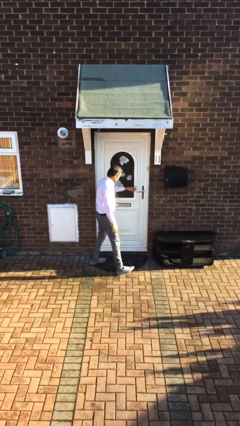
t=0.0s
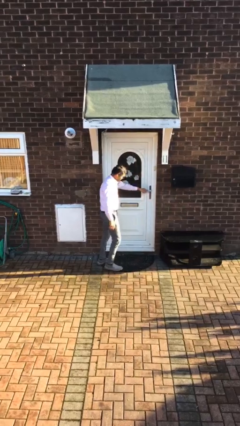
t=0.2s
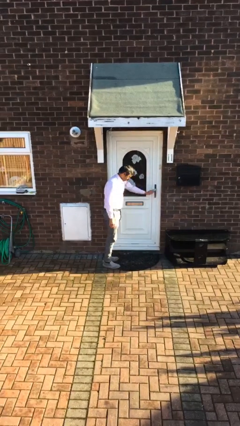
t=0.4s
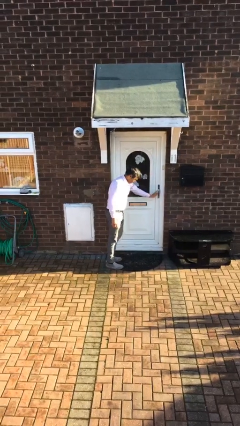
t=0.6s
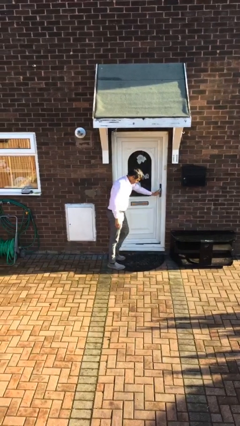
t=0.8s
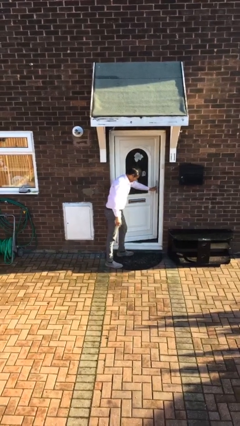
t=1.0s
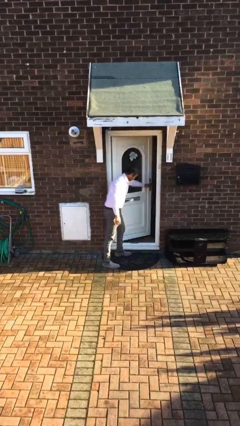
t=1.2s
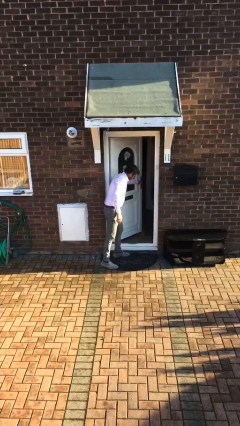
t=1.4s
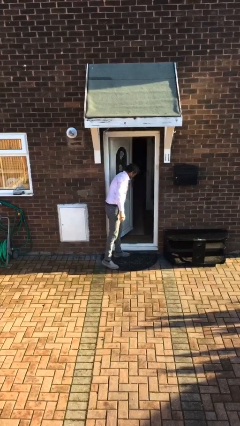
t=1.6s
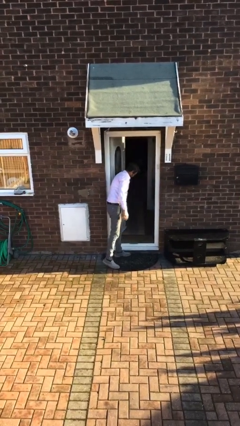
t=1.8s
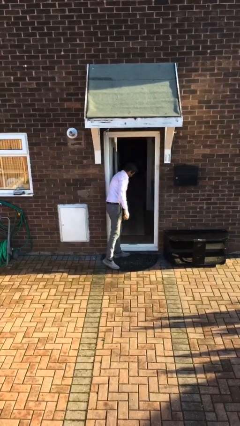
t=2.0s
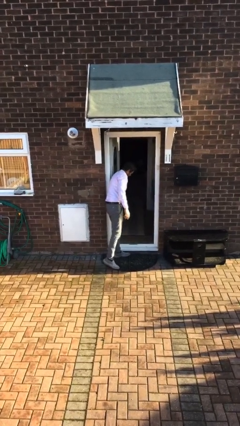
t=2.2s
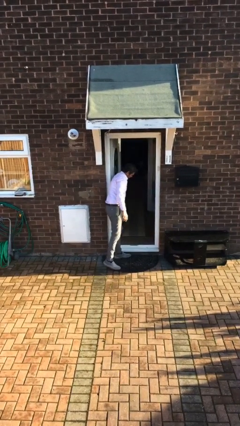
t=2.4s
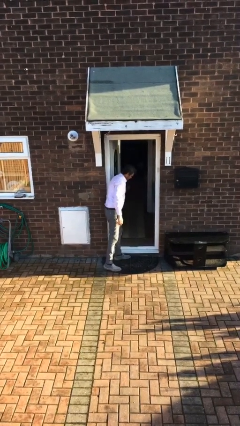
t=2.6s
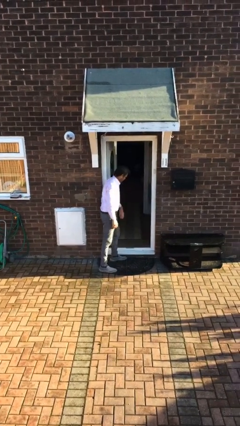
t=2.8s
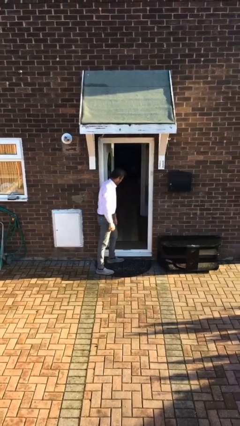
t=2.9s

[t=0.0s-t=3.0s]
person opens facility door

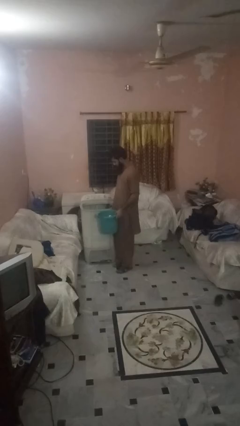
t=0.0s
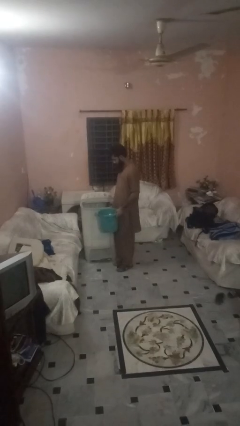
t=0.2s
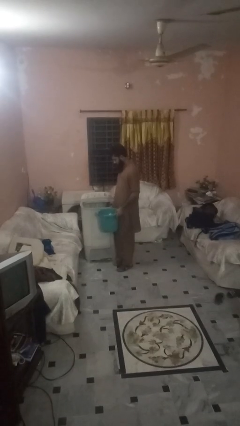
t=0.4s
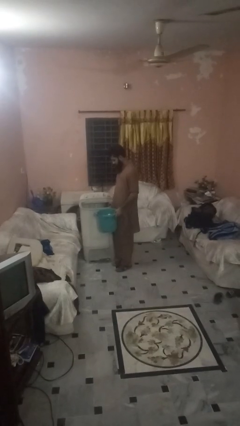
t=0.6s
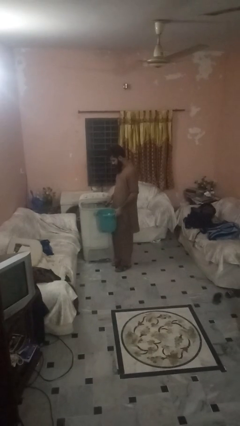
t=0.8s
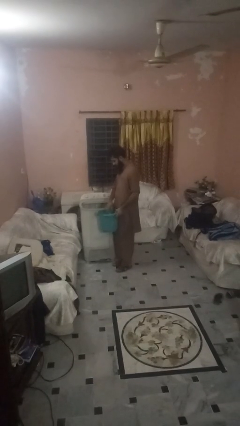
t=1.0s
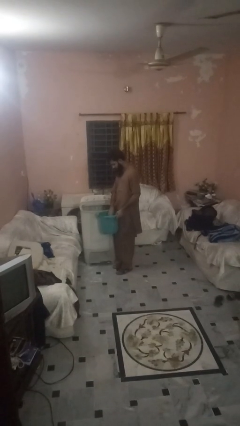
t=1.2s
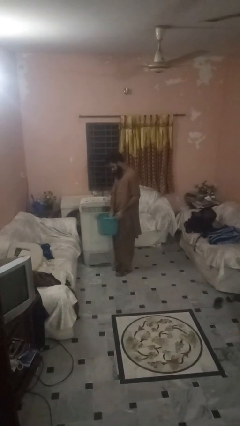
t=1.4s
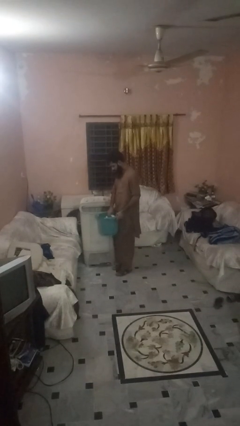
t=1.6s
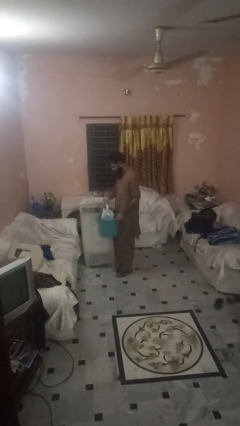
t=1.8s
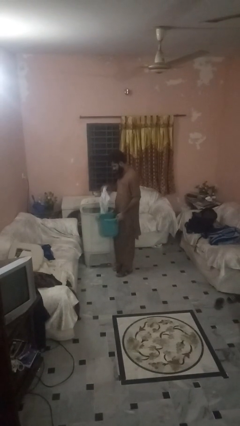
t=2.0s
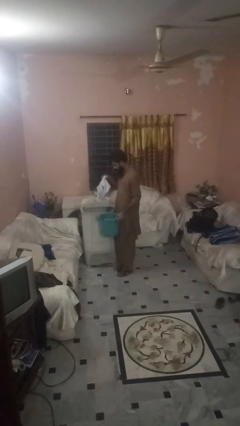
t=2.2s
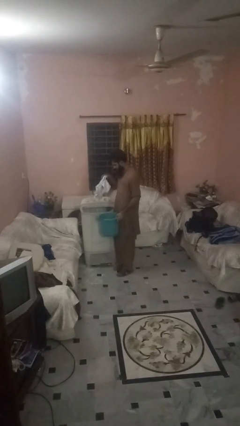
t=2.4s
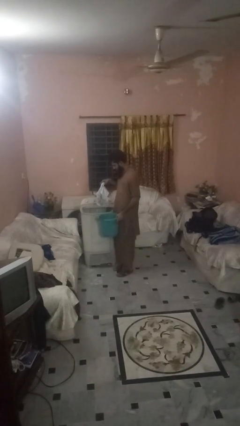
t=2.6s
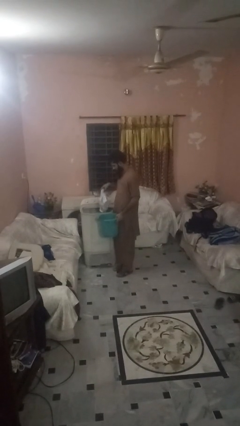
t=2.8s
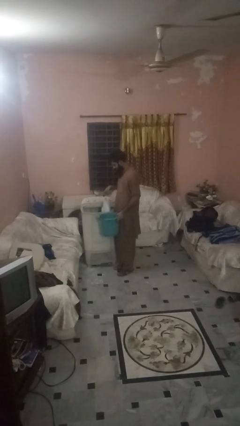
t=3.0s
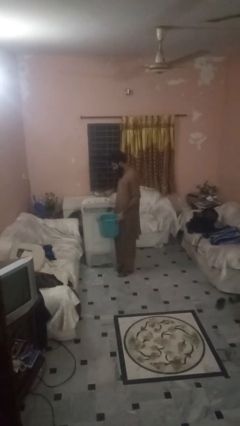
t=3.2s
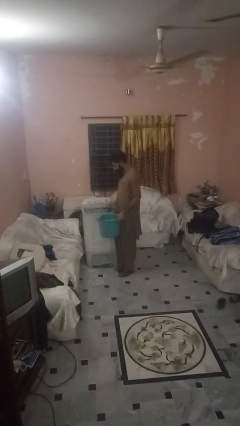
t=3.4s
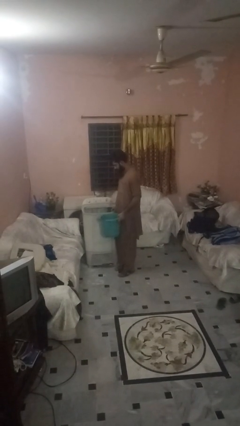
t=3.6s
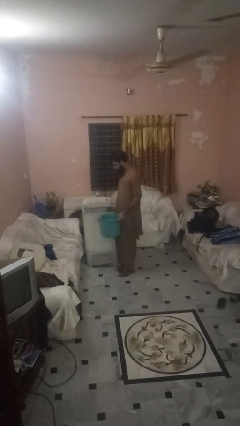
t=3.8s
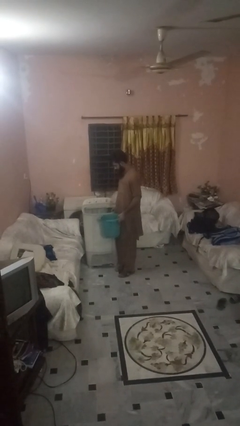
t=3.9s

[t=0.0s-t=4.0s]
person loads clotheswasher

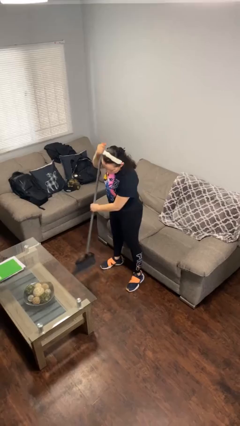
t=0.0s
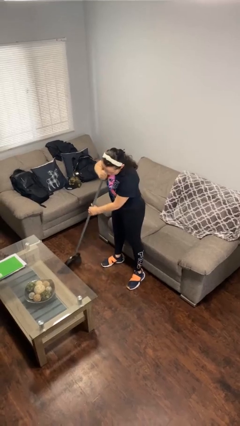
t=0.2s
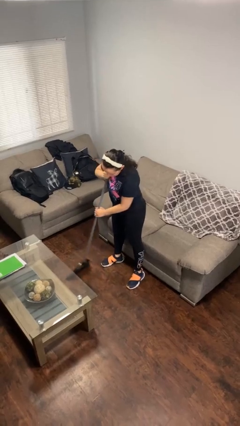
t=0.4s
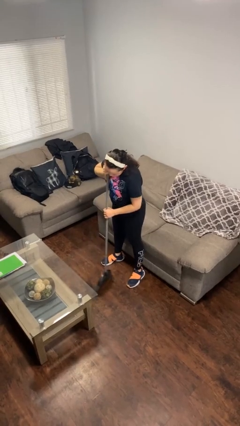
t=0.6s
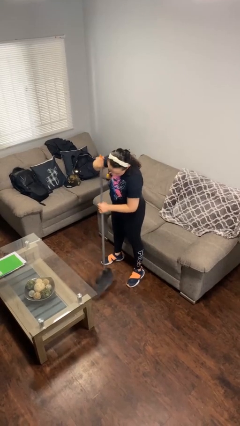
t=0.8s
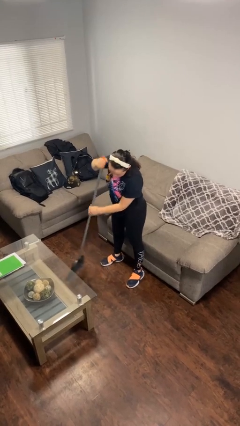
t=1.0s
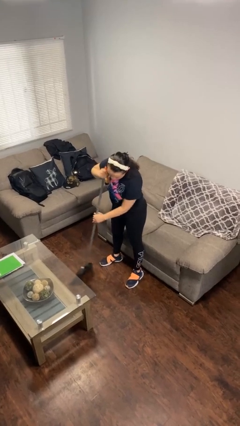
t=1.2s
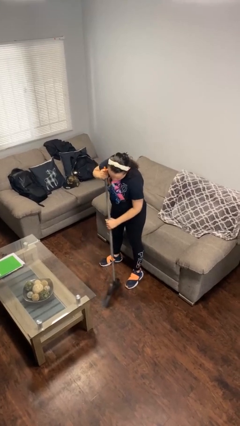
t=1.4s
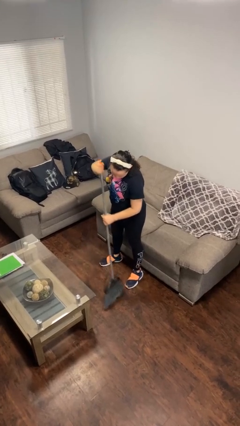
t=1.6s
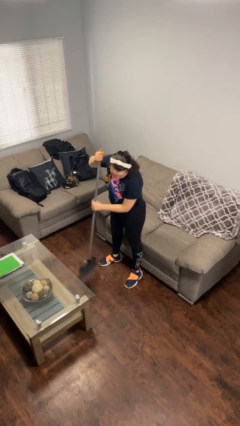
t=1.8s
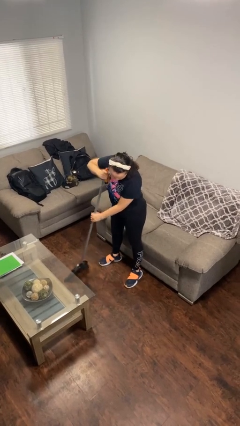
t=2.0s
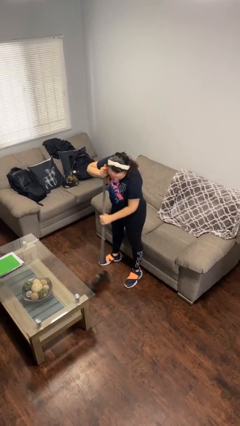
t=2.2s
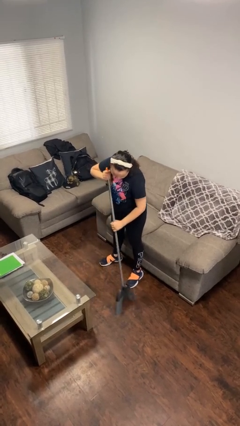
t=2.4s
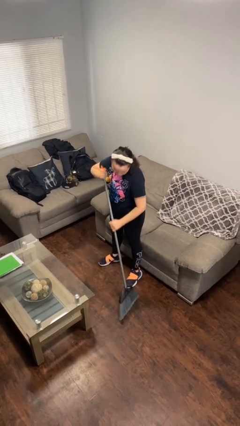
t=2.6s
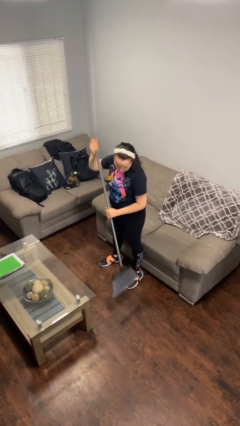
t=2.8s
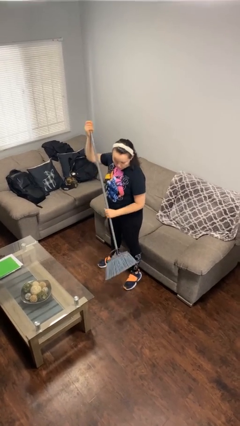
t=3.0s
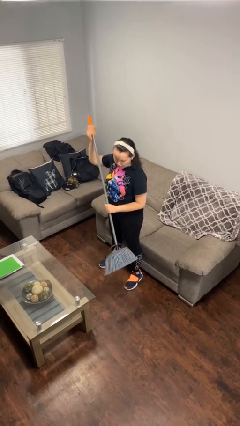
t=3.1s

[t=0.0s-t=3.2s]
person sweeps floor

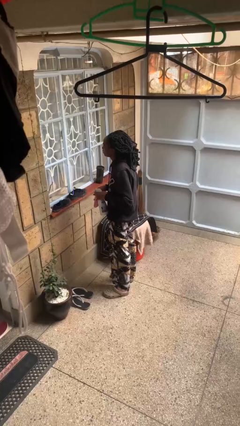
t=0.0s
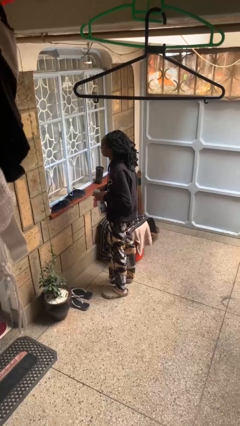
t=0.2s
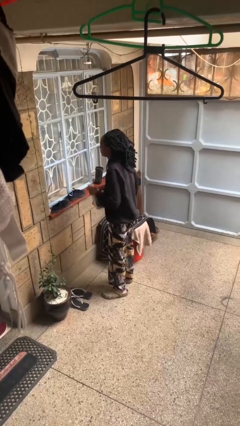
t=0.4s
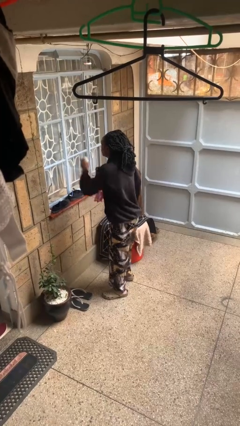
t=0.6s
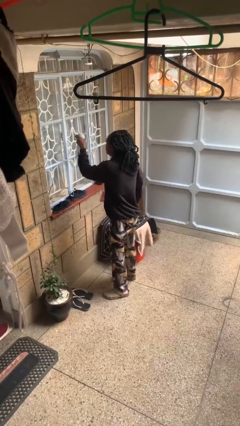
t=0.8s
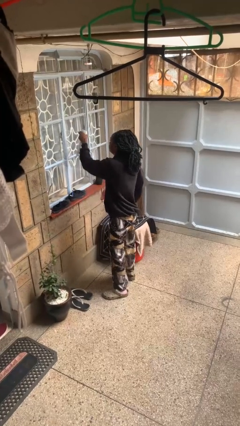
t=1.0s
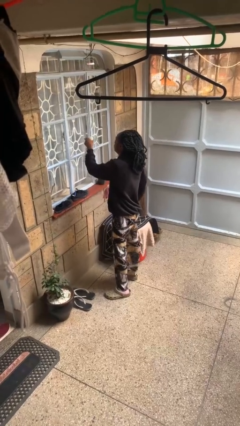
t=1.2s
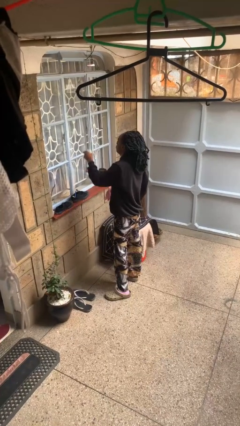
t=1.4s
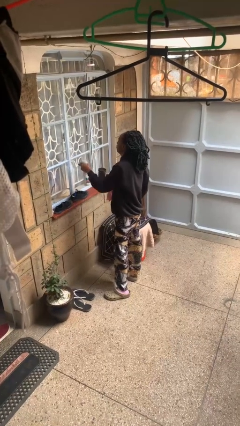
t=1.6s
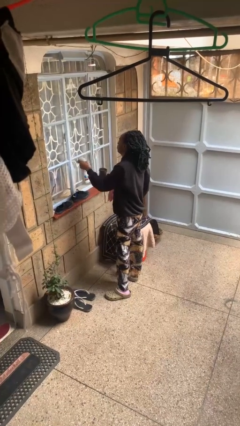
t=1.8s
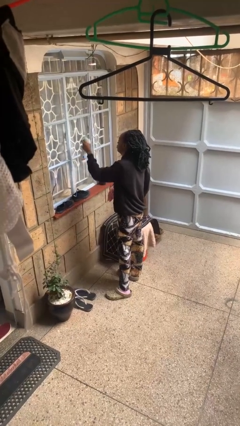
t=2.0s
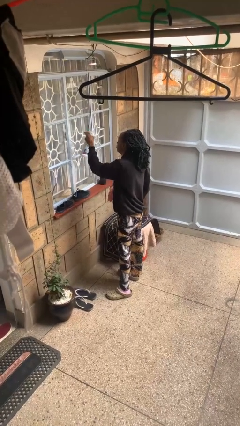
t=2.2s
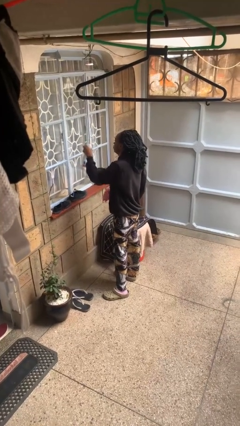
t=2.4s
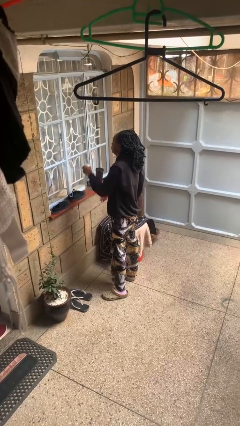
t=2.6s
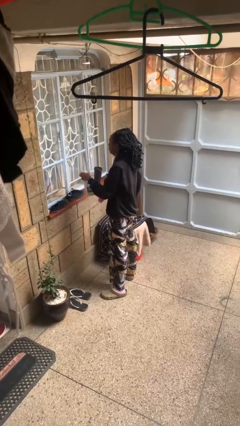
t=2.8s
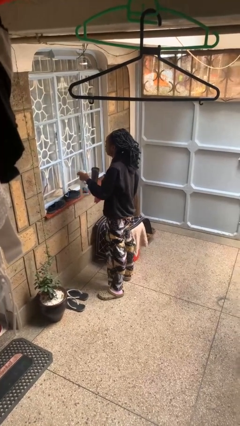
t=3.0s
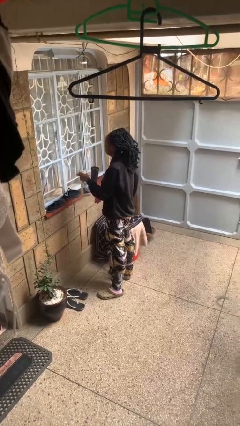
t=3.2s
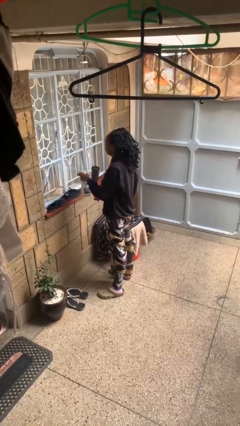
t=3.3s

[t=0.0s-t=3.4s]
person sprays from bottle

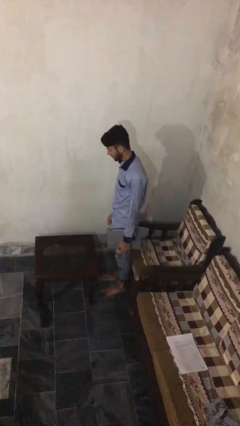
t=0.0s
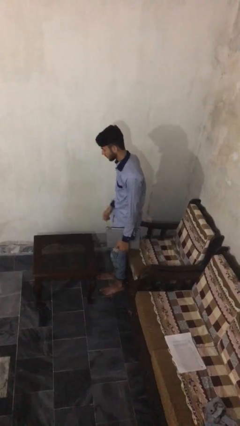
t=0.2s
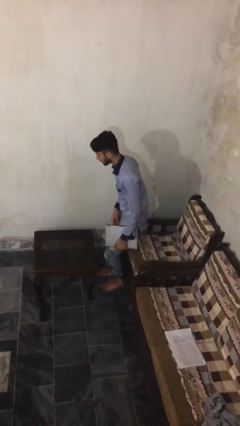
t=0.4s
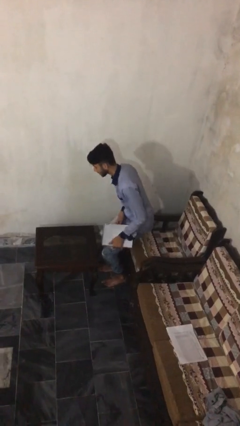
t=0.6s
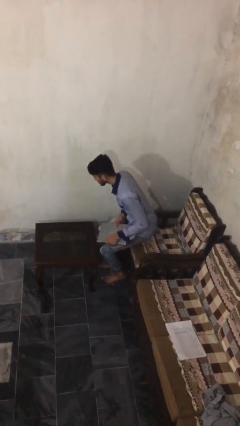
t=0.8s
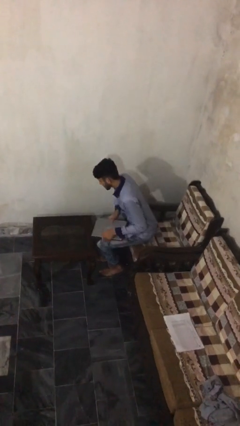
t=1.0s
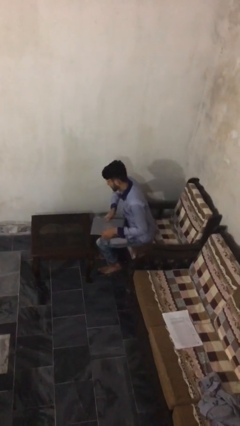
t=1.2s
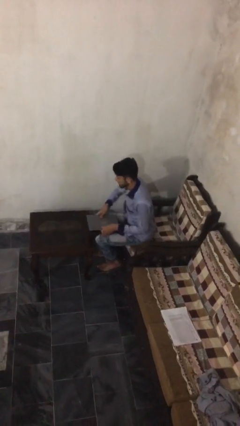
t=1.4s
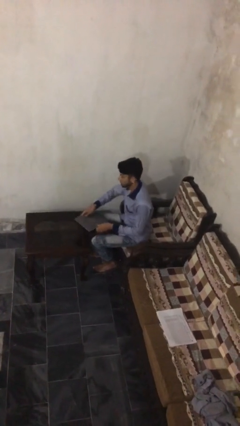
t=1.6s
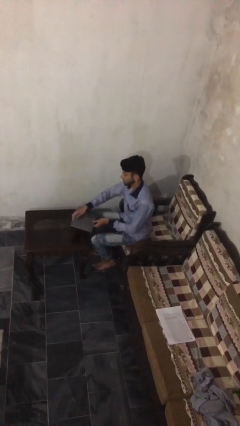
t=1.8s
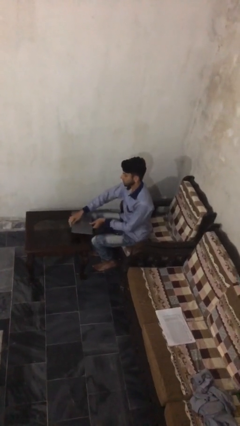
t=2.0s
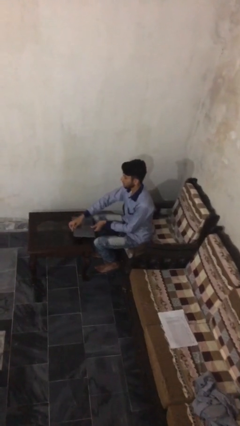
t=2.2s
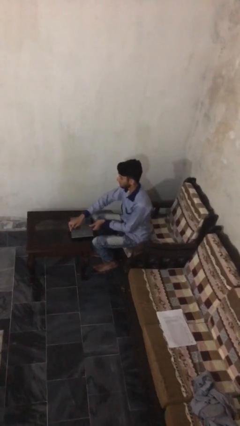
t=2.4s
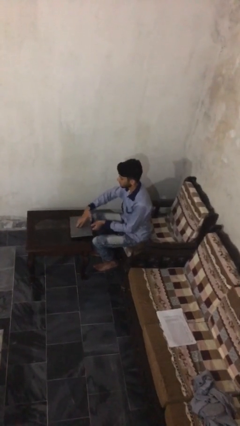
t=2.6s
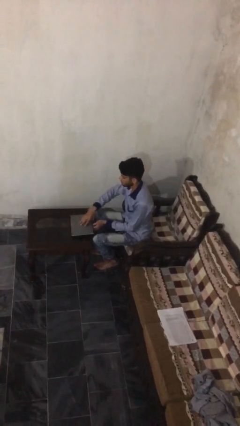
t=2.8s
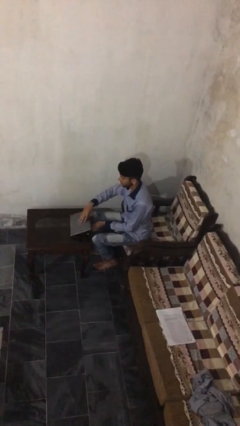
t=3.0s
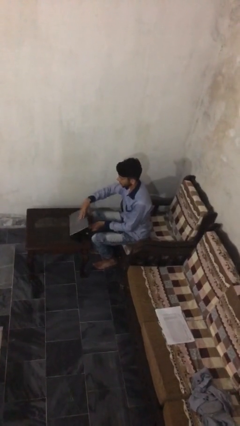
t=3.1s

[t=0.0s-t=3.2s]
person sits down

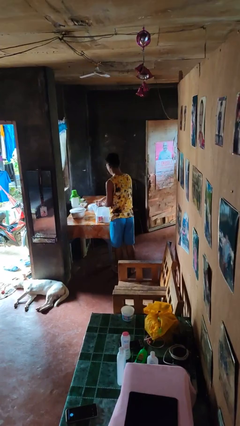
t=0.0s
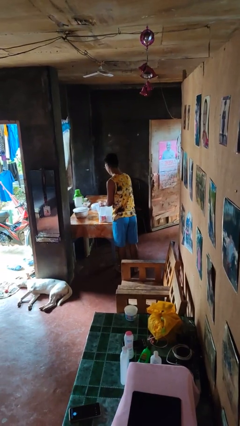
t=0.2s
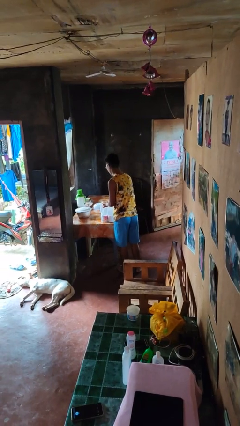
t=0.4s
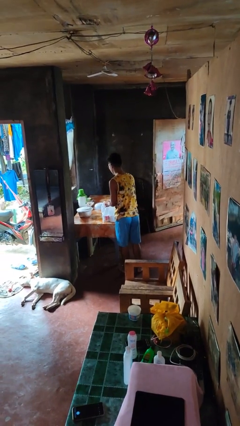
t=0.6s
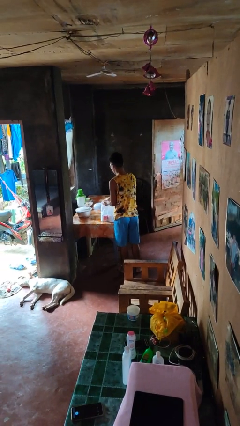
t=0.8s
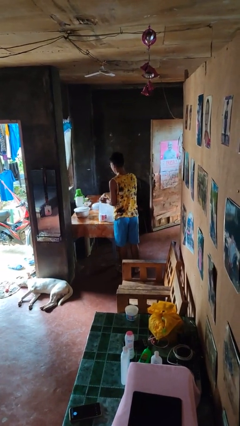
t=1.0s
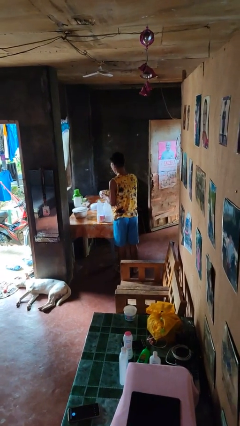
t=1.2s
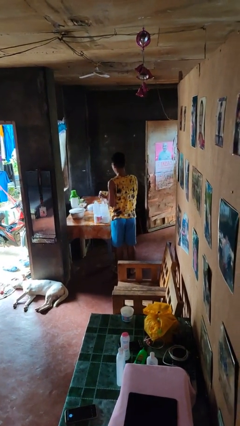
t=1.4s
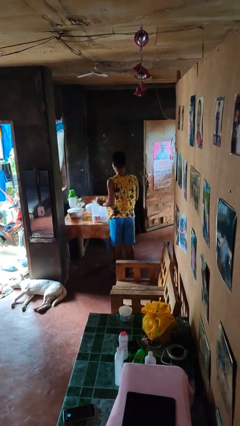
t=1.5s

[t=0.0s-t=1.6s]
person takes object from bag
